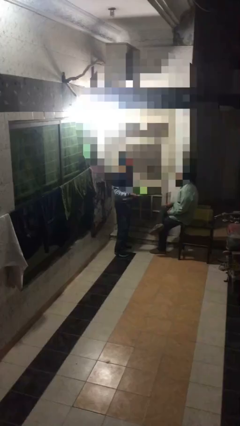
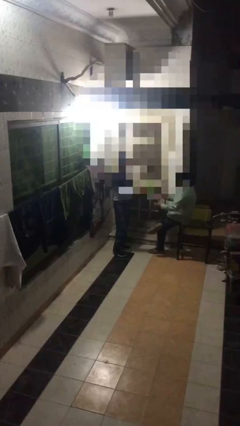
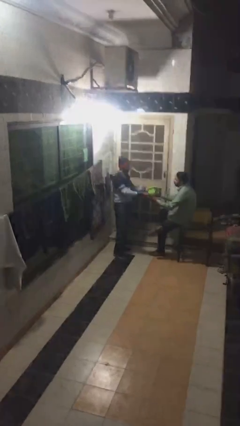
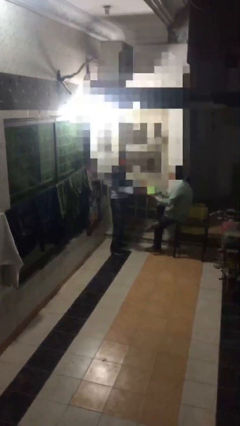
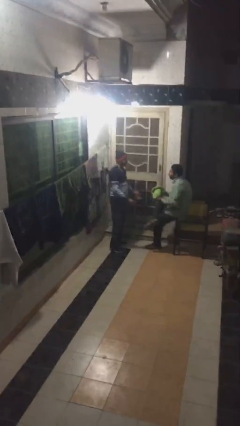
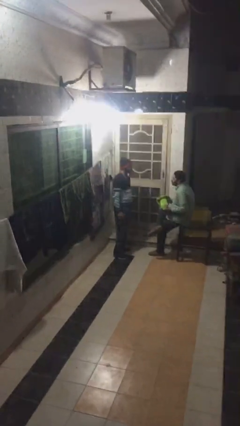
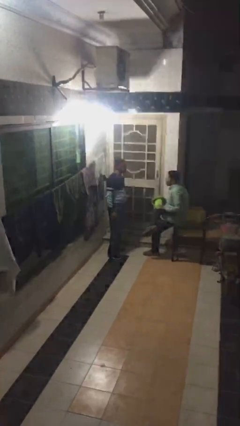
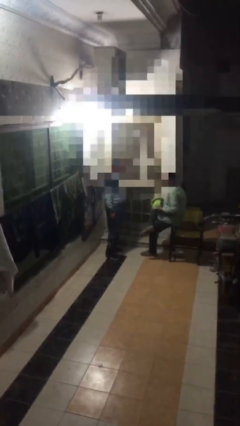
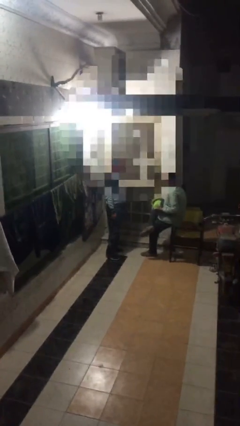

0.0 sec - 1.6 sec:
person transfers object to person

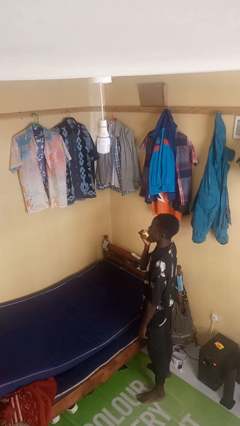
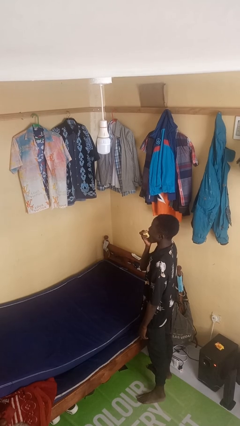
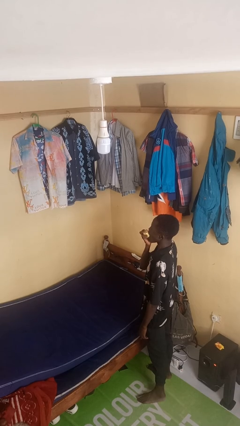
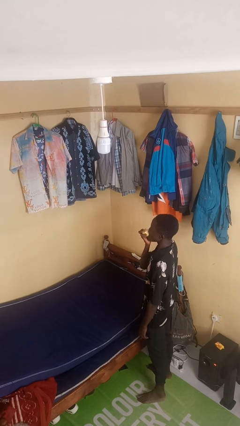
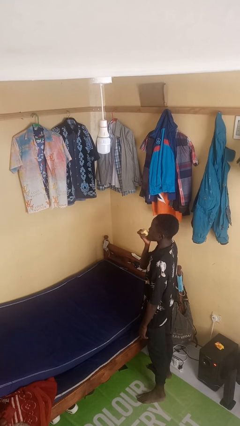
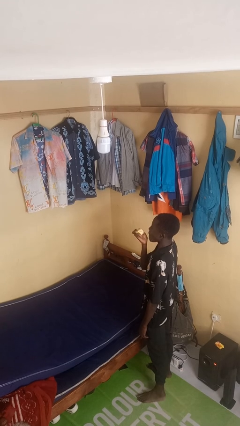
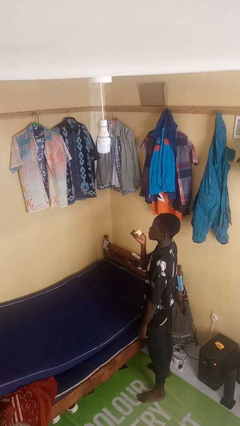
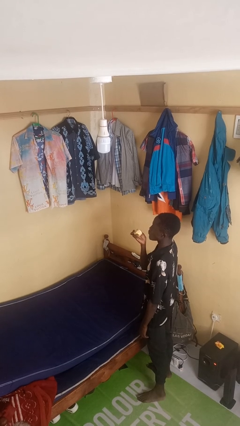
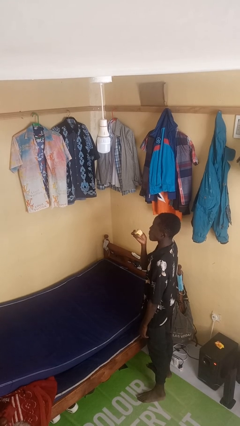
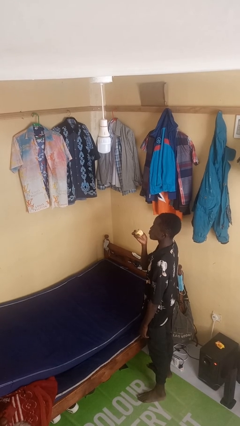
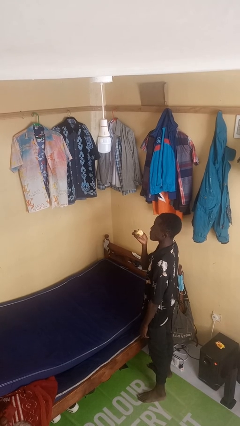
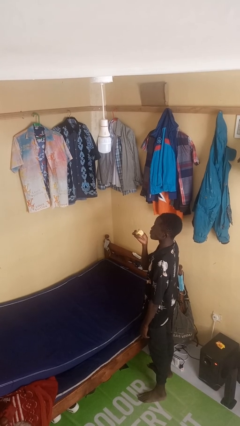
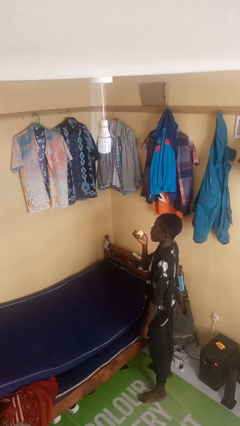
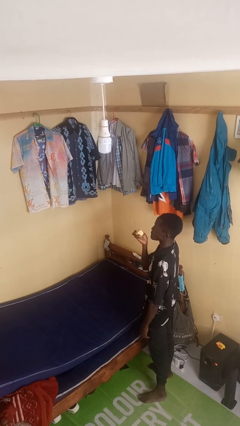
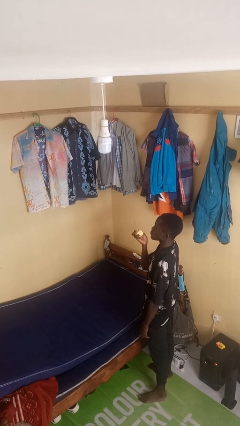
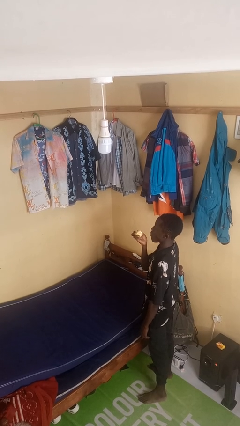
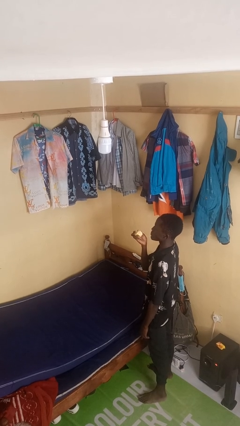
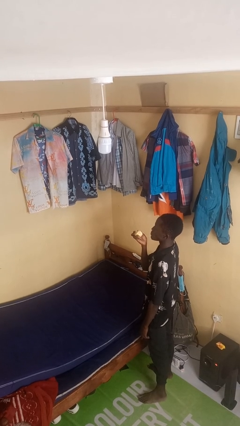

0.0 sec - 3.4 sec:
person eats apple

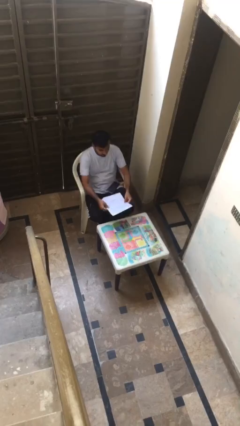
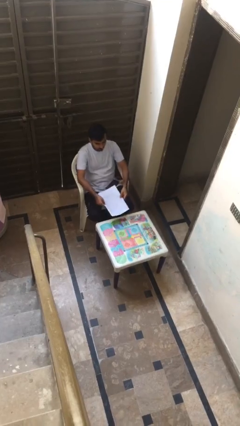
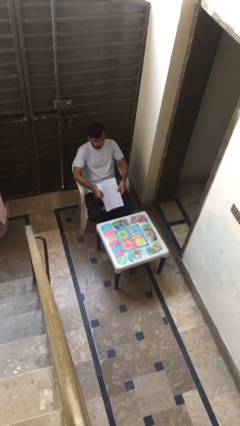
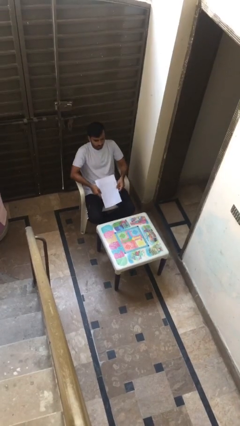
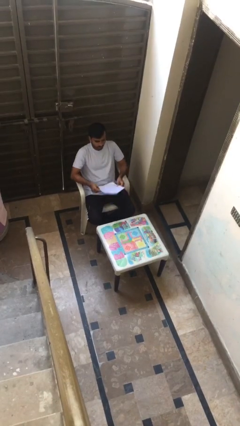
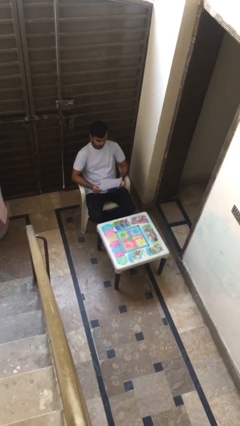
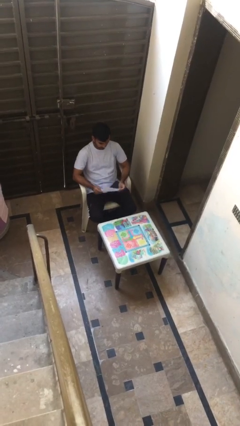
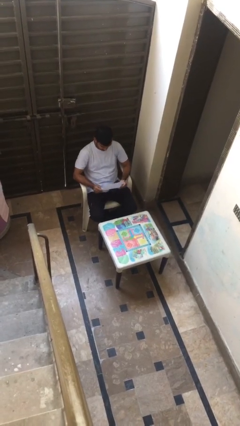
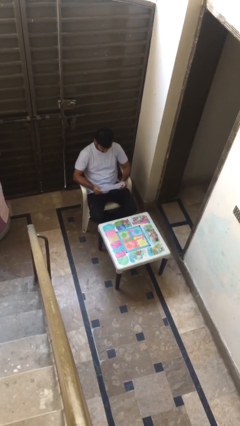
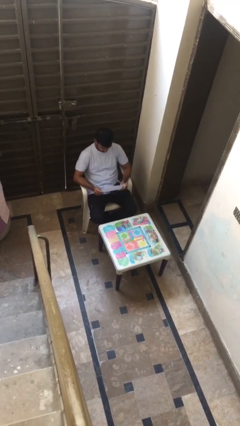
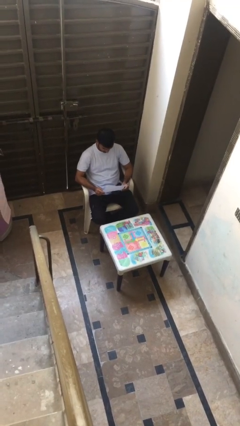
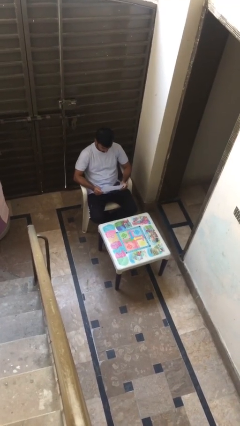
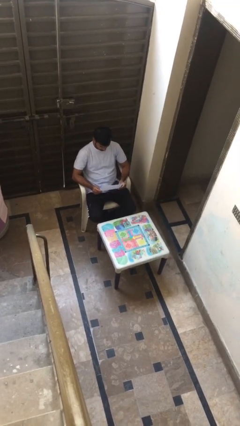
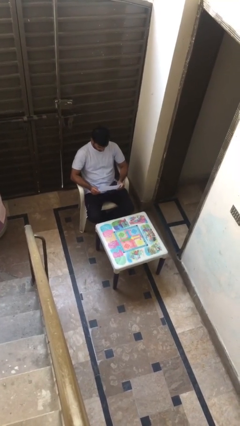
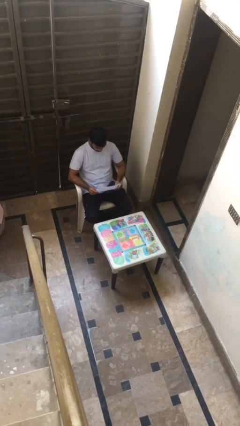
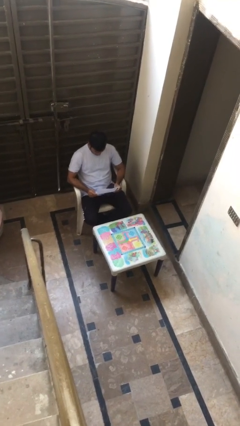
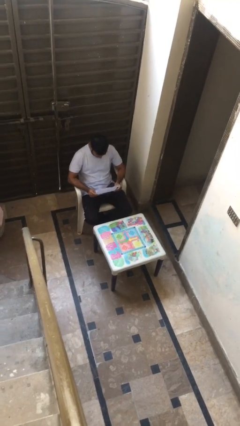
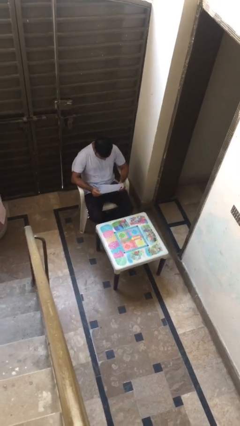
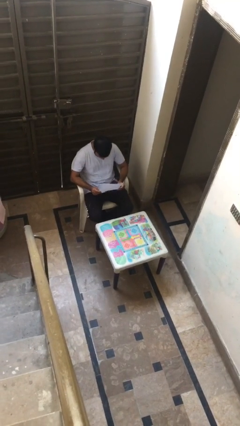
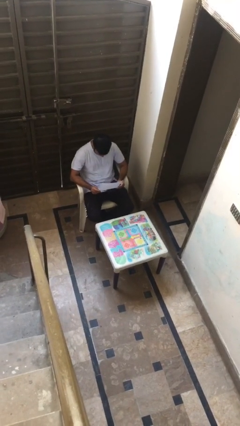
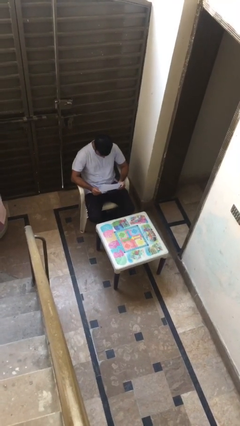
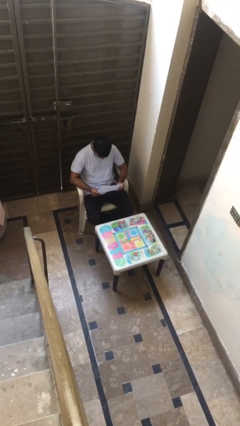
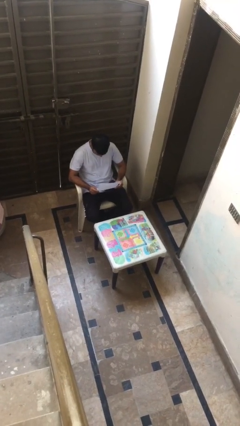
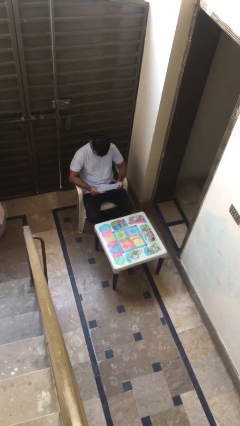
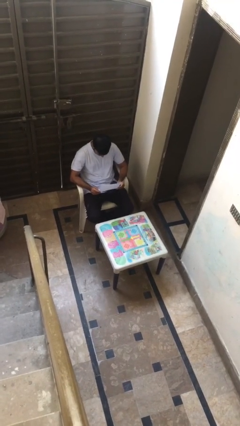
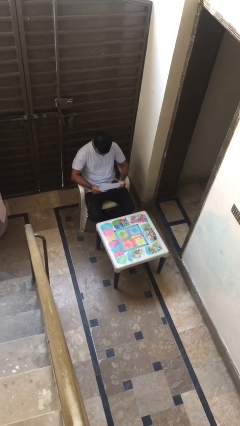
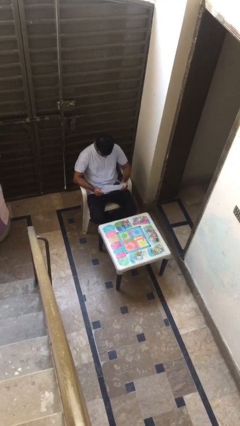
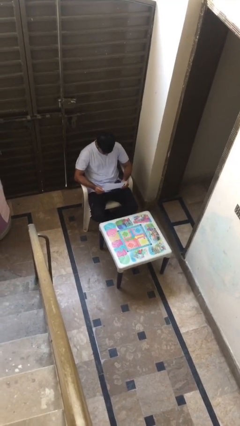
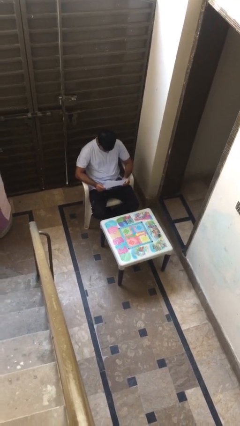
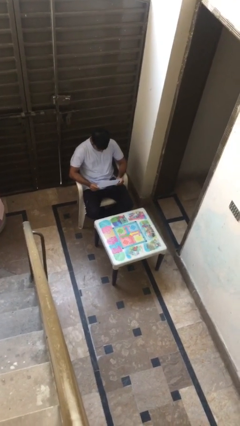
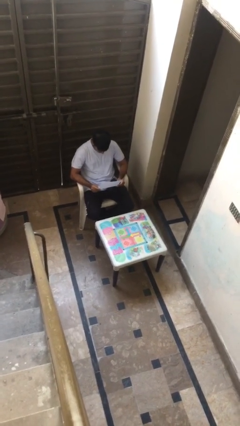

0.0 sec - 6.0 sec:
person reads document

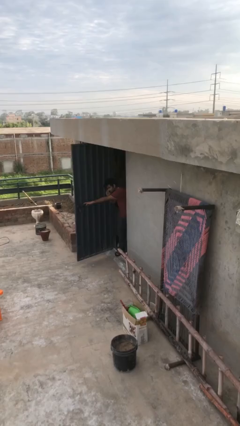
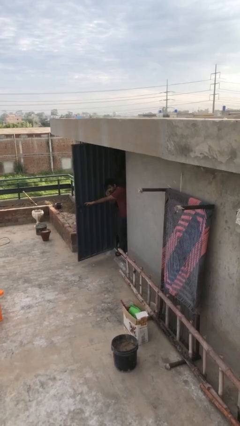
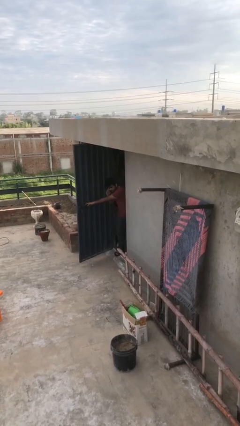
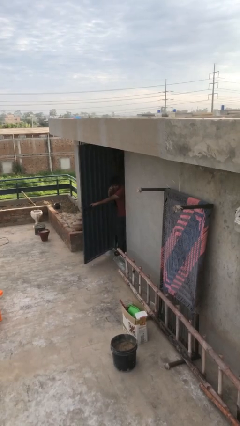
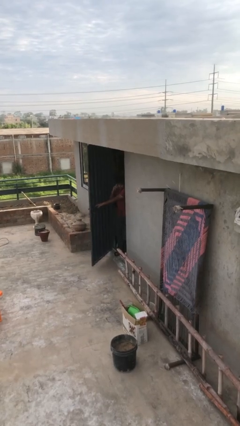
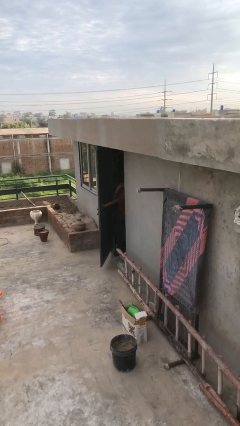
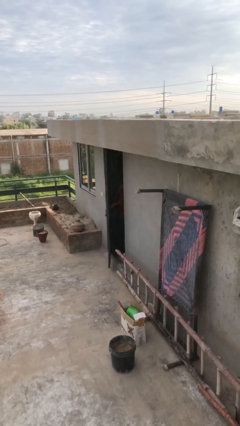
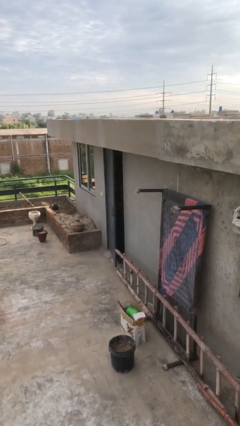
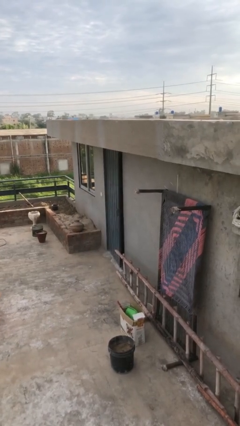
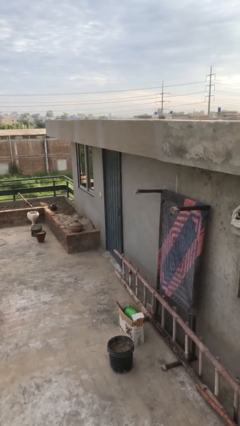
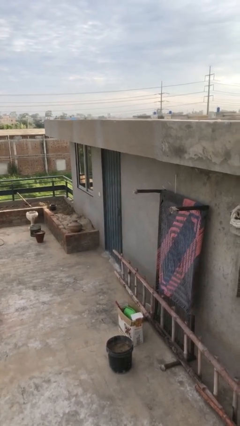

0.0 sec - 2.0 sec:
person closes facility door

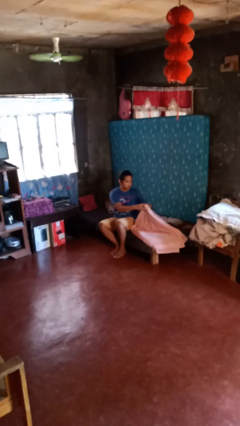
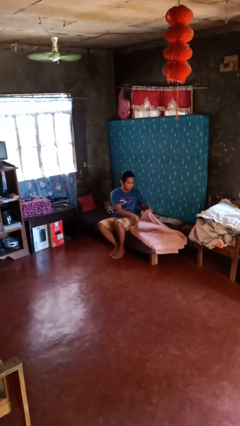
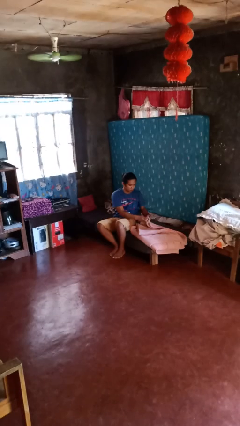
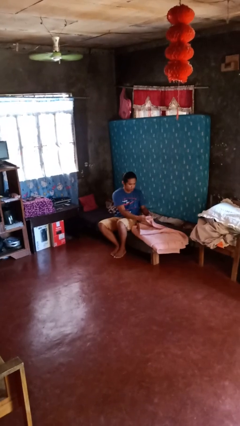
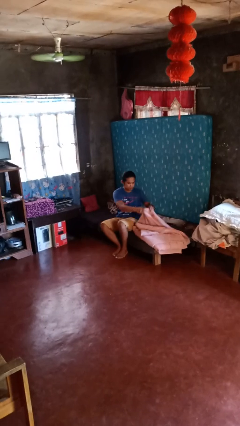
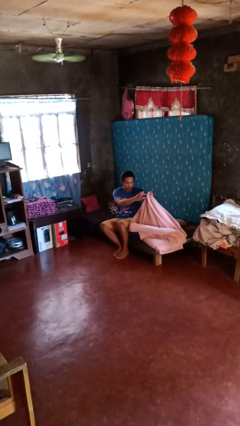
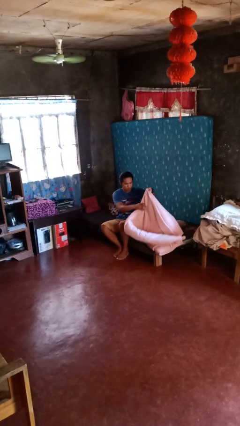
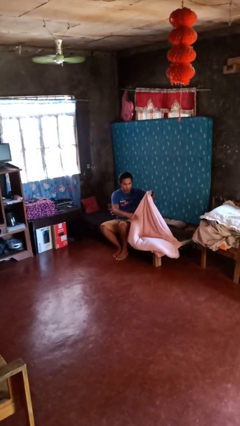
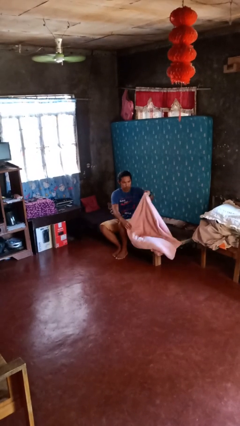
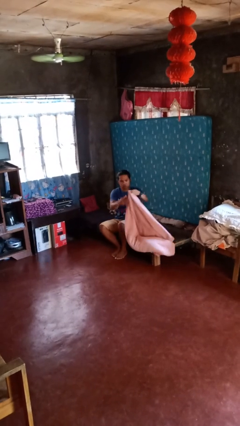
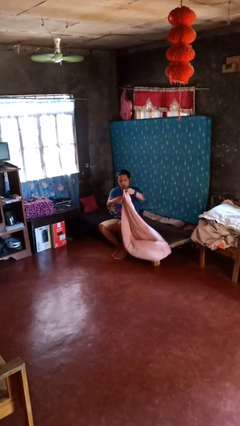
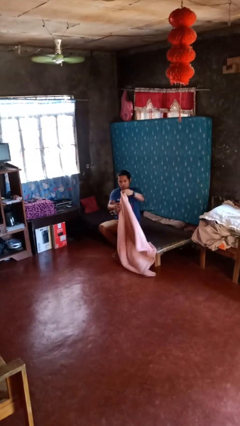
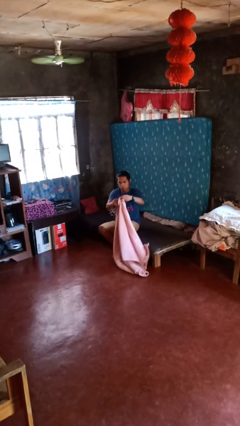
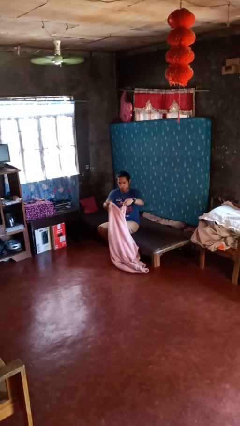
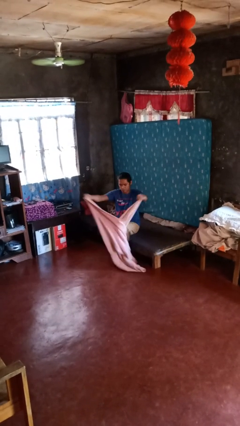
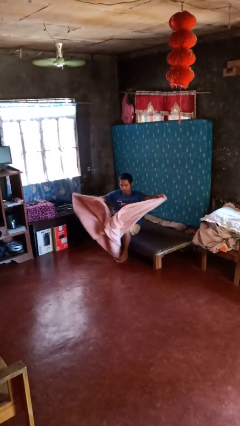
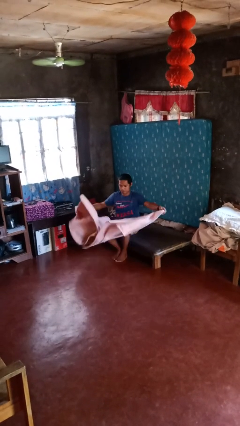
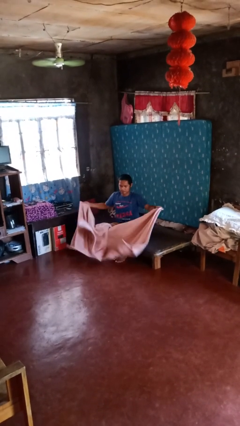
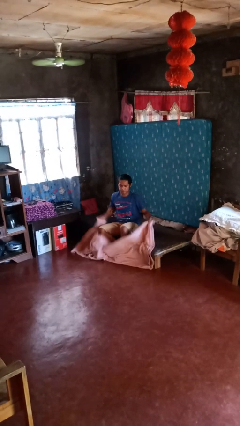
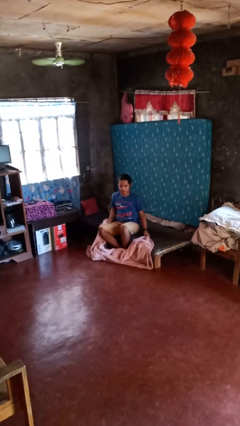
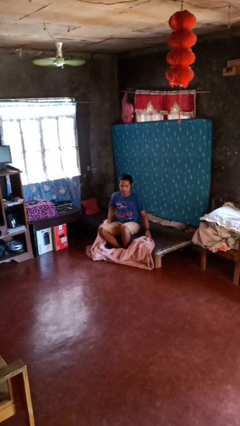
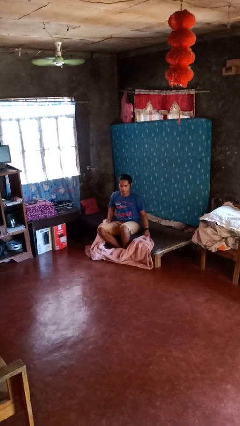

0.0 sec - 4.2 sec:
person unfolds blanket

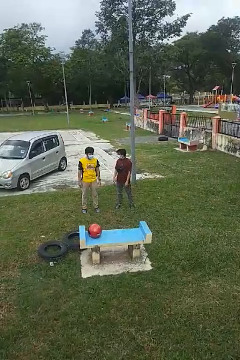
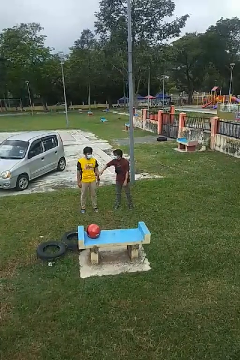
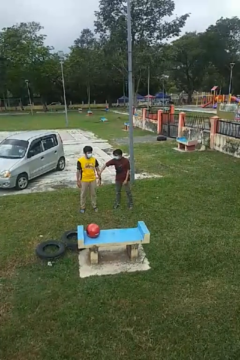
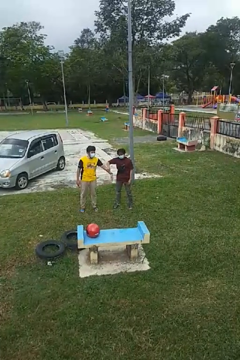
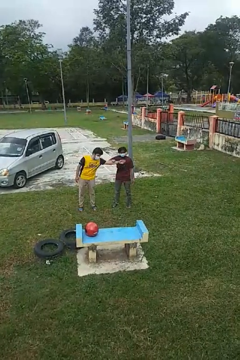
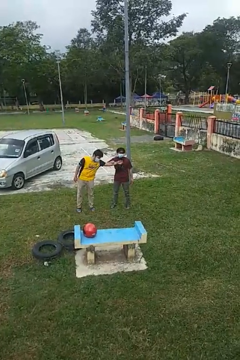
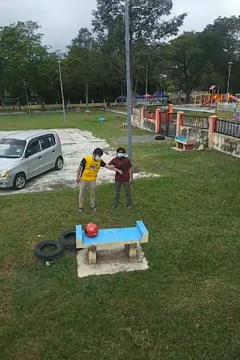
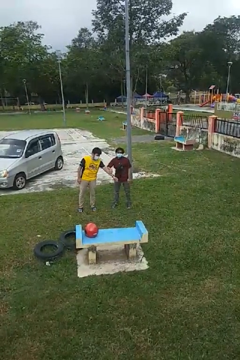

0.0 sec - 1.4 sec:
person grabs person by forearm
